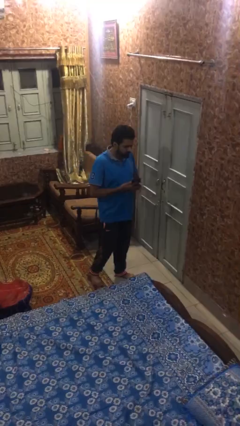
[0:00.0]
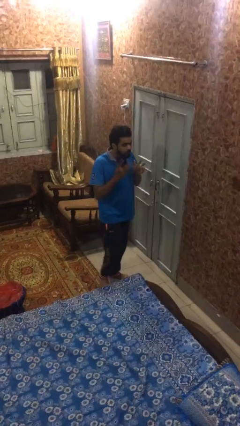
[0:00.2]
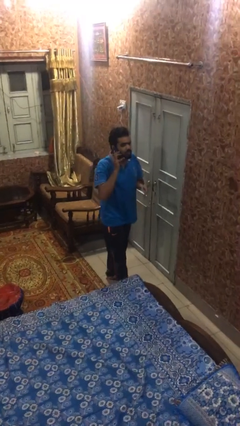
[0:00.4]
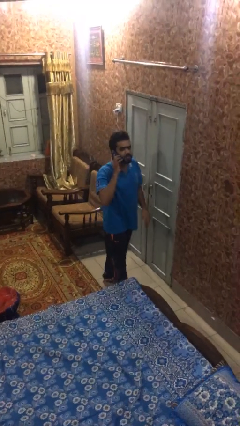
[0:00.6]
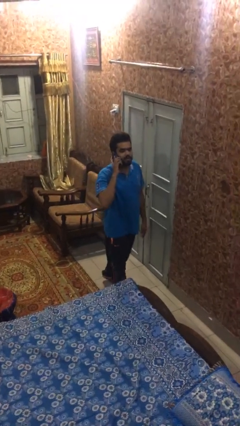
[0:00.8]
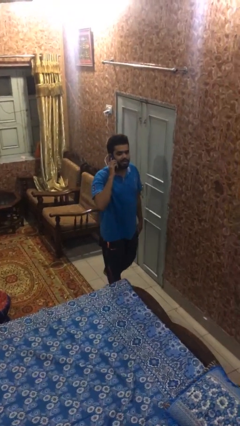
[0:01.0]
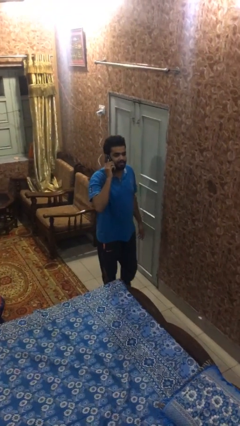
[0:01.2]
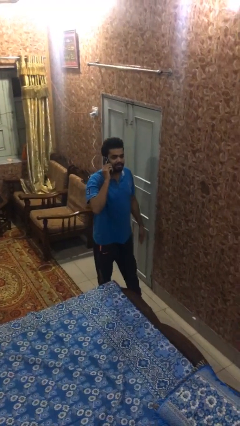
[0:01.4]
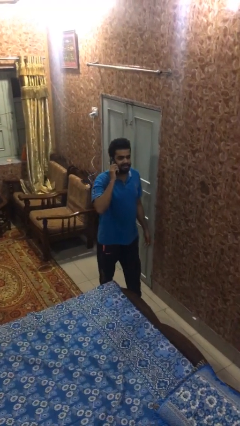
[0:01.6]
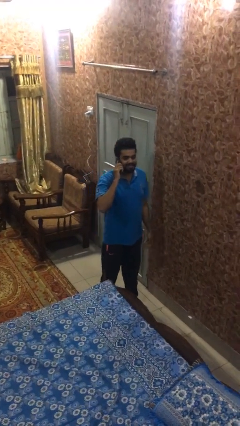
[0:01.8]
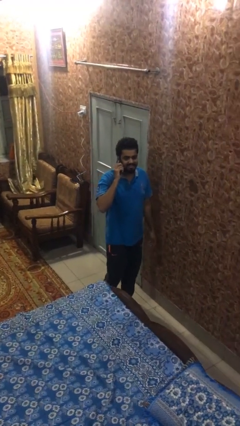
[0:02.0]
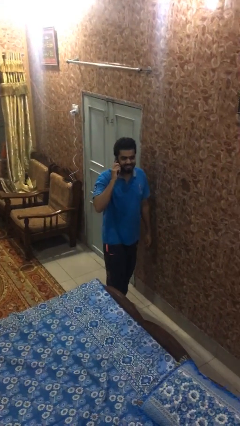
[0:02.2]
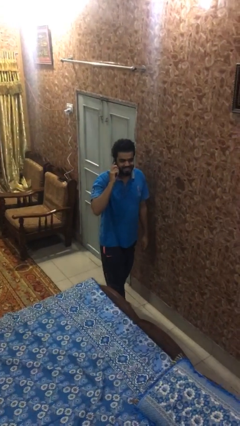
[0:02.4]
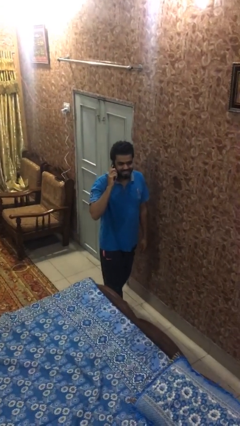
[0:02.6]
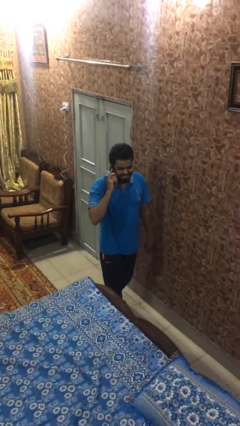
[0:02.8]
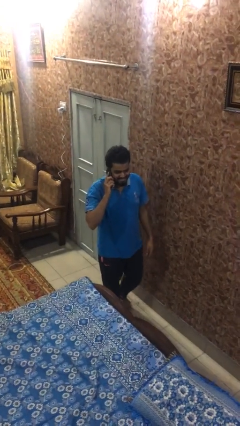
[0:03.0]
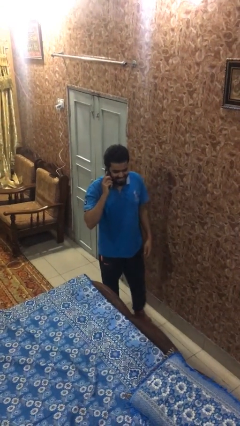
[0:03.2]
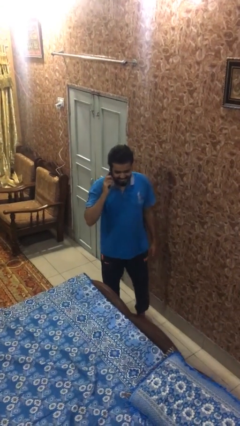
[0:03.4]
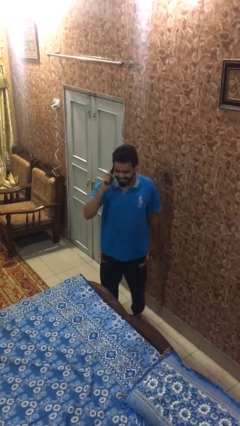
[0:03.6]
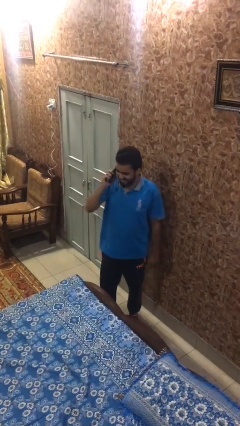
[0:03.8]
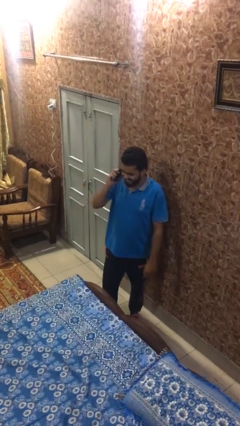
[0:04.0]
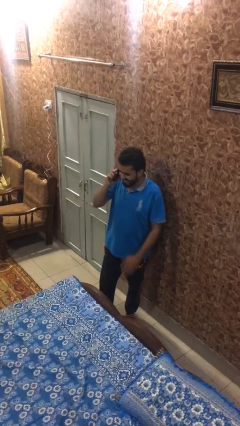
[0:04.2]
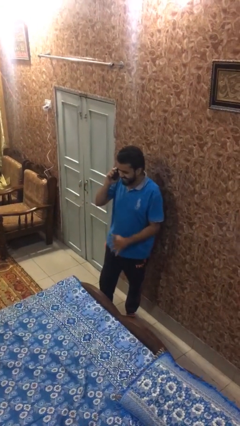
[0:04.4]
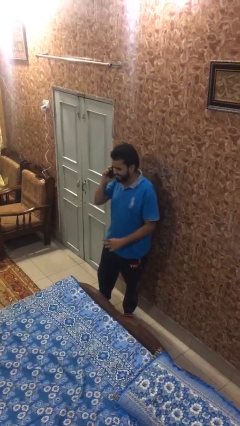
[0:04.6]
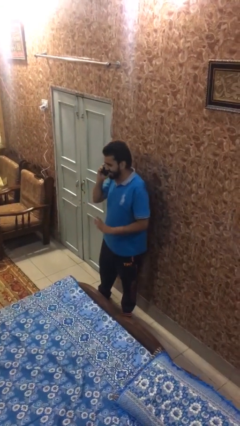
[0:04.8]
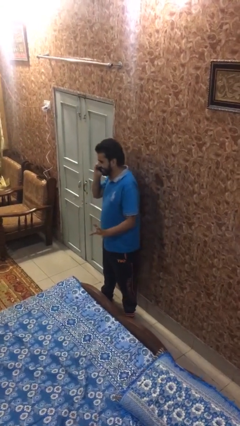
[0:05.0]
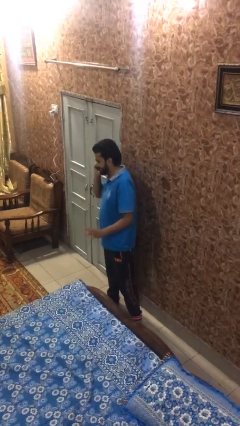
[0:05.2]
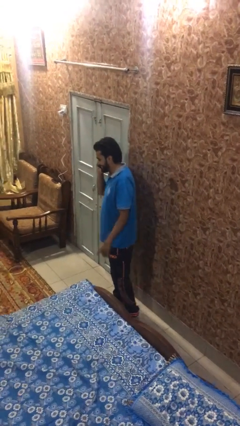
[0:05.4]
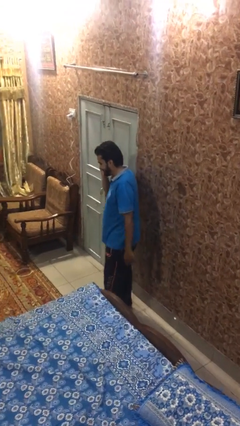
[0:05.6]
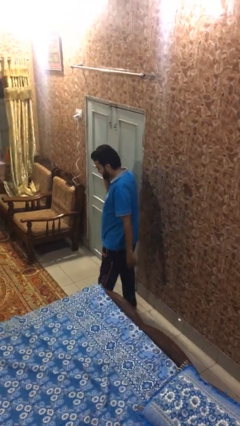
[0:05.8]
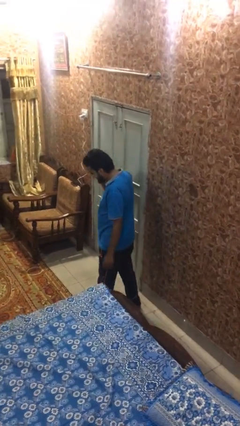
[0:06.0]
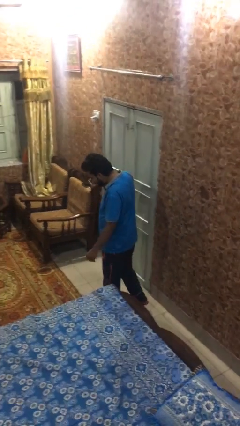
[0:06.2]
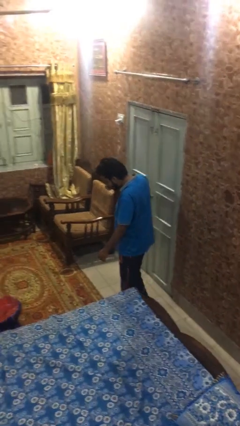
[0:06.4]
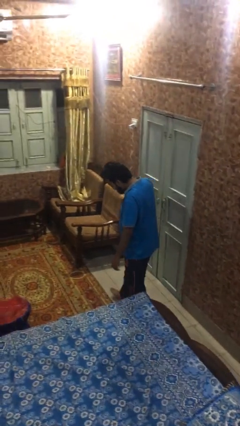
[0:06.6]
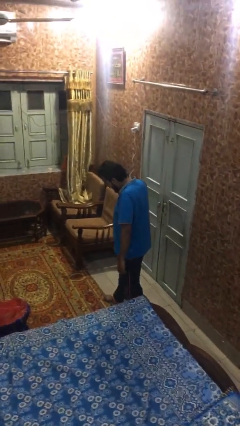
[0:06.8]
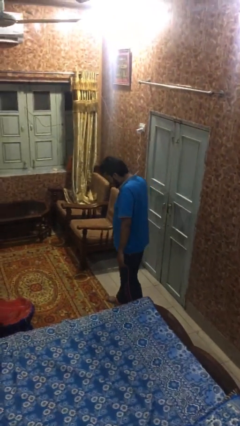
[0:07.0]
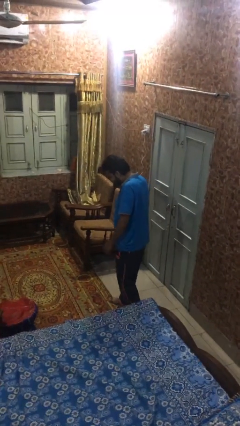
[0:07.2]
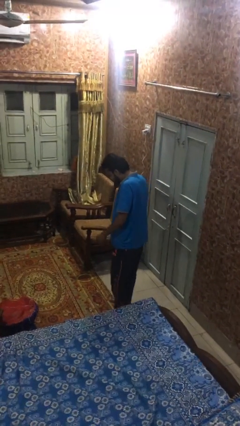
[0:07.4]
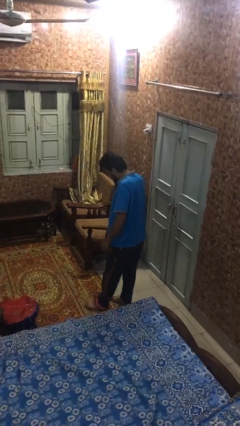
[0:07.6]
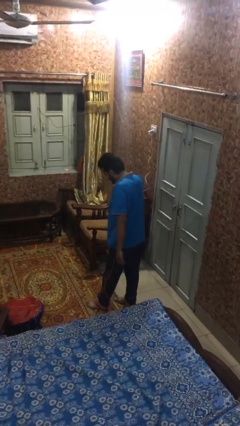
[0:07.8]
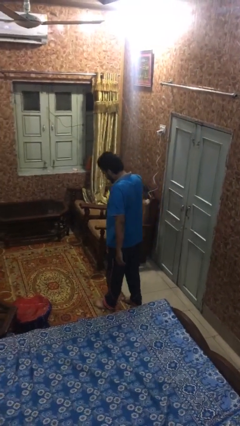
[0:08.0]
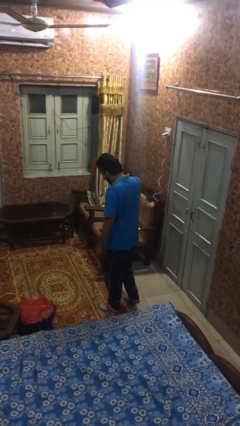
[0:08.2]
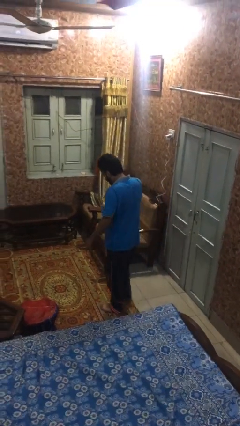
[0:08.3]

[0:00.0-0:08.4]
person talks on phone

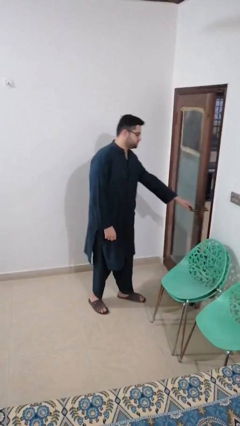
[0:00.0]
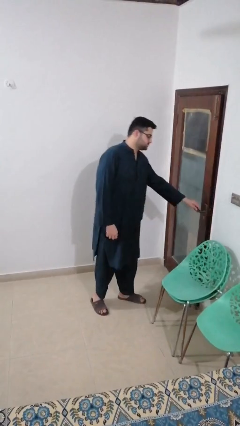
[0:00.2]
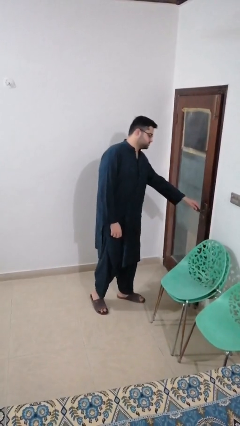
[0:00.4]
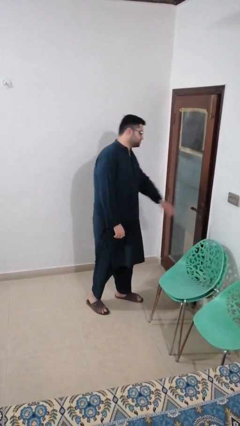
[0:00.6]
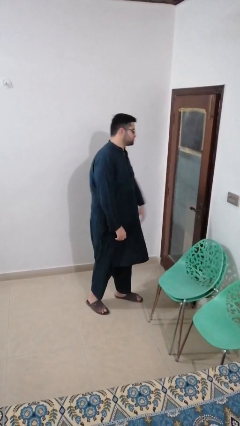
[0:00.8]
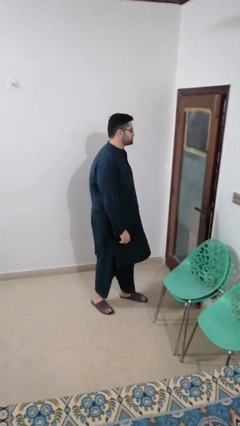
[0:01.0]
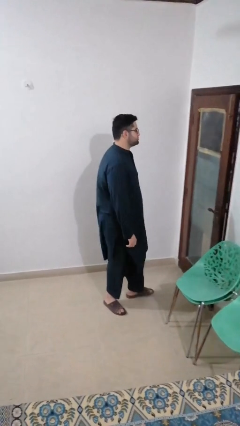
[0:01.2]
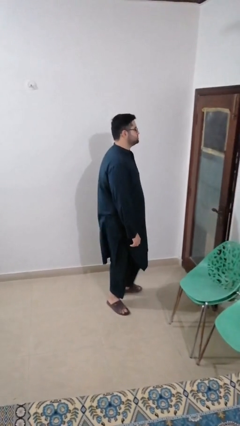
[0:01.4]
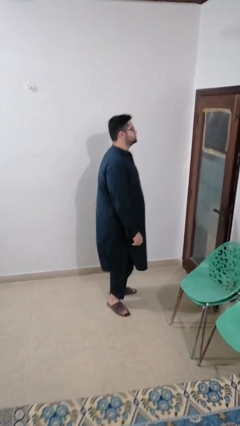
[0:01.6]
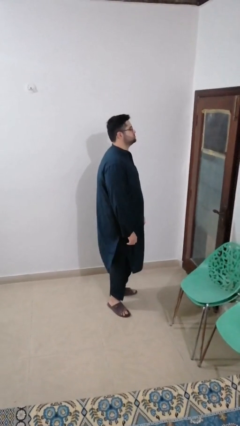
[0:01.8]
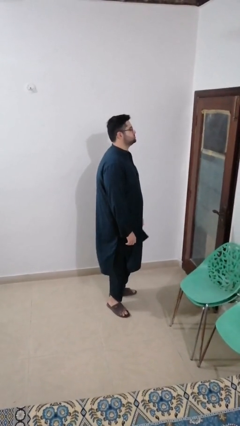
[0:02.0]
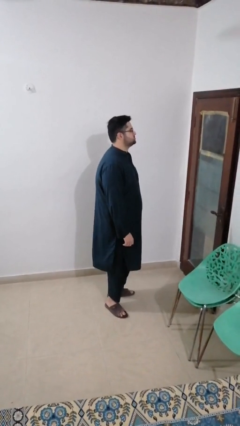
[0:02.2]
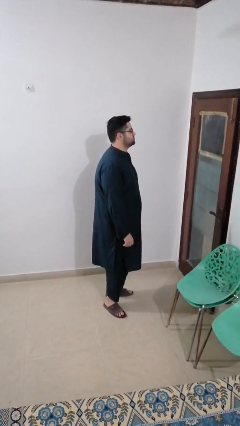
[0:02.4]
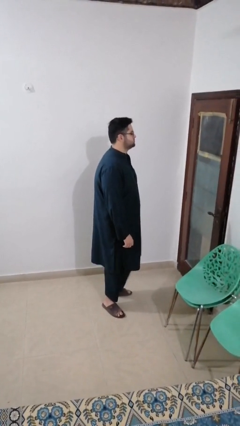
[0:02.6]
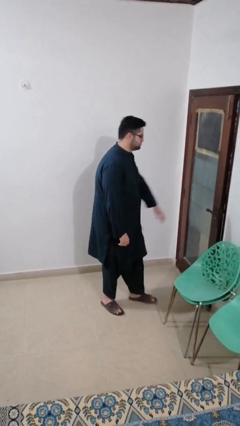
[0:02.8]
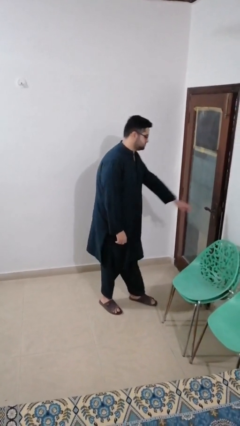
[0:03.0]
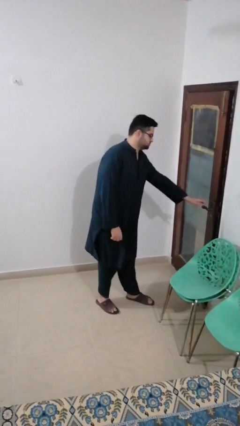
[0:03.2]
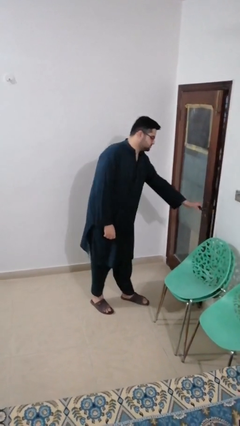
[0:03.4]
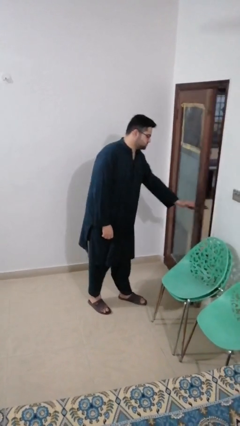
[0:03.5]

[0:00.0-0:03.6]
person closes facility door

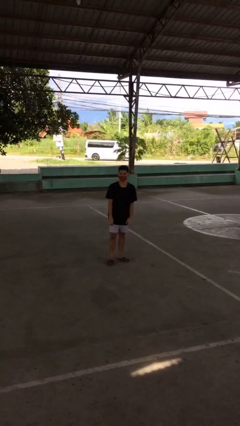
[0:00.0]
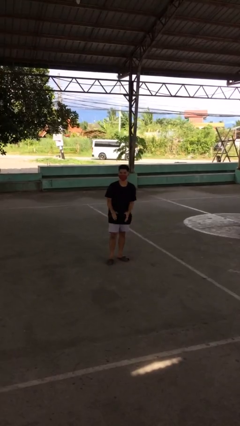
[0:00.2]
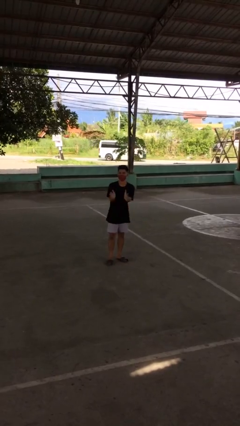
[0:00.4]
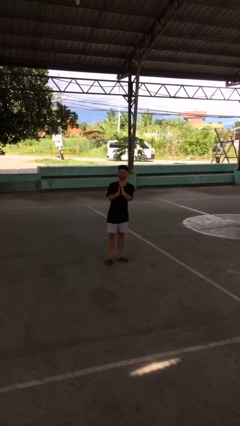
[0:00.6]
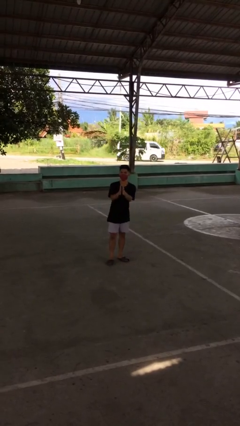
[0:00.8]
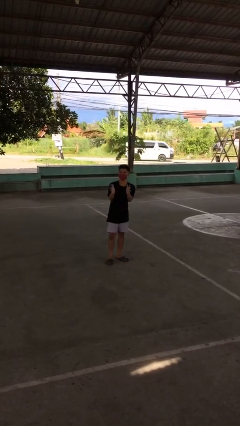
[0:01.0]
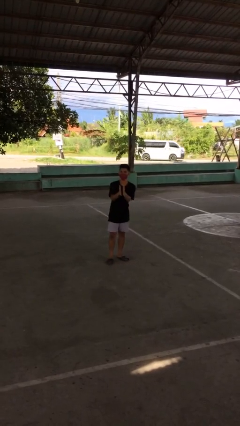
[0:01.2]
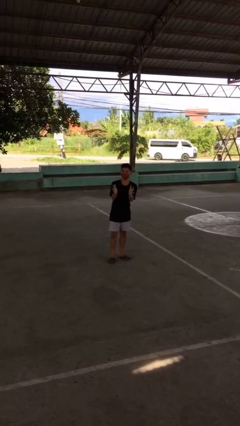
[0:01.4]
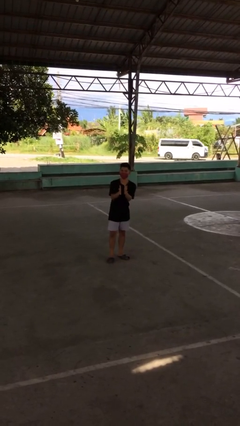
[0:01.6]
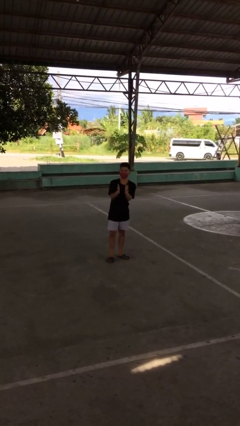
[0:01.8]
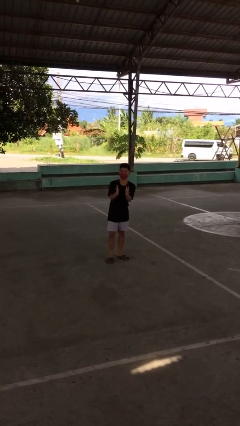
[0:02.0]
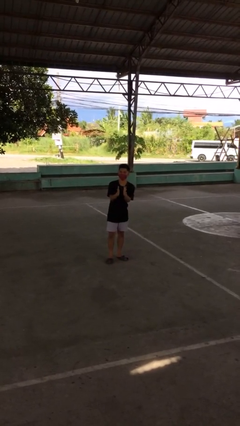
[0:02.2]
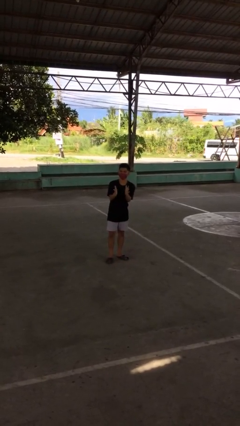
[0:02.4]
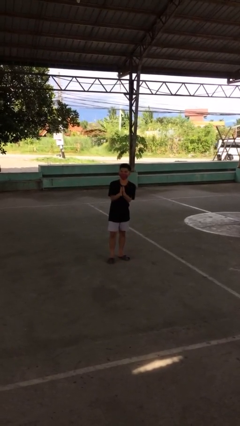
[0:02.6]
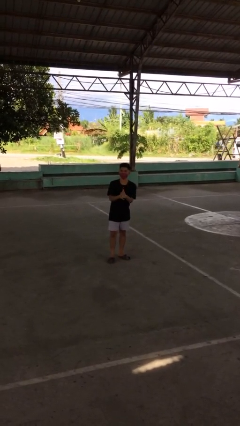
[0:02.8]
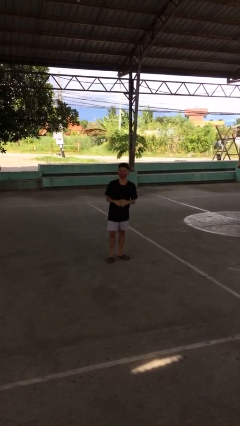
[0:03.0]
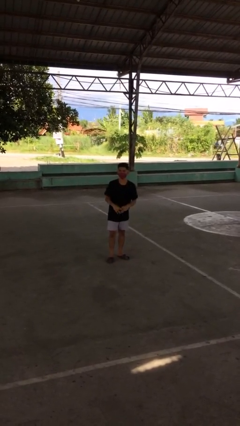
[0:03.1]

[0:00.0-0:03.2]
person claps hands

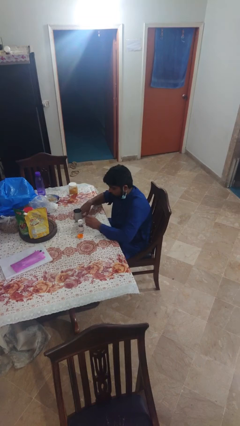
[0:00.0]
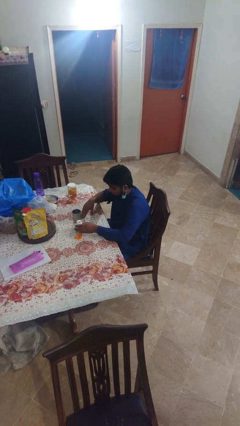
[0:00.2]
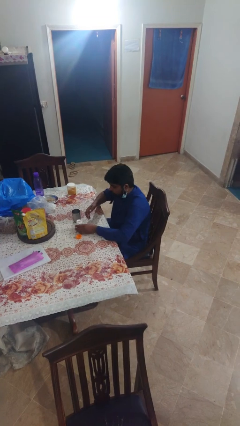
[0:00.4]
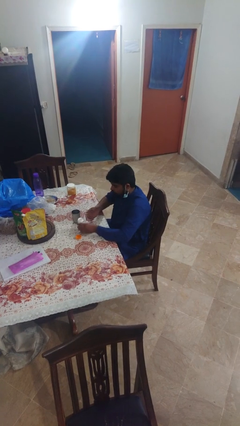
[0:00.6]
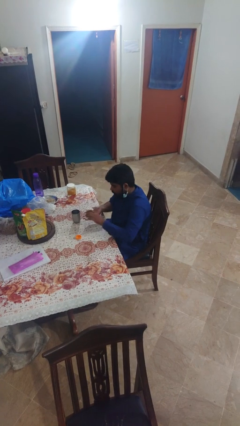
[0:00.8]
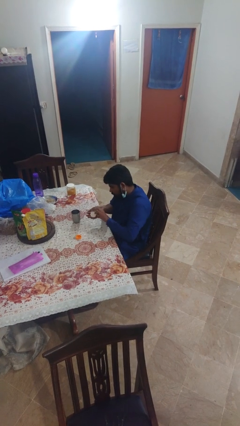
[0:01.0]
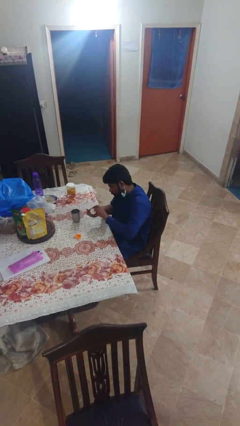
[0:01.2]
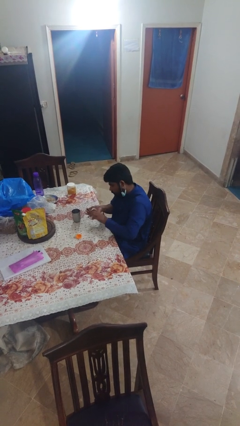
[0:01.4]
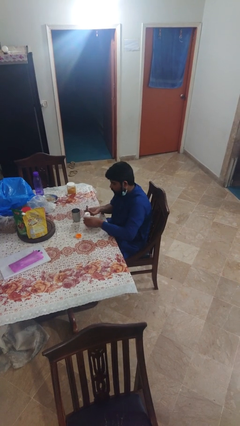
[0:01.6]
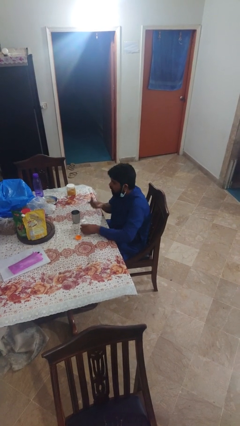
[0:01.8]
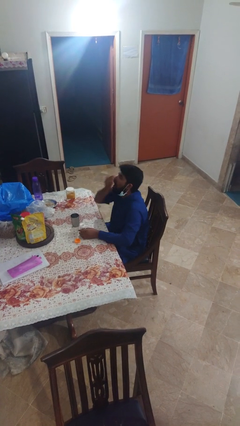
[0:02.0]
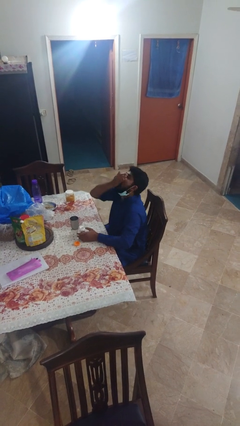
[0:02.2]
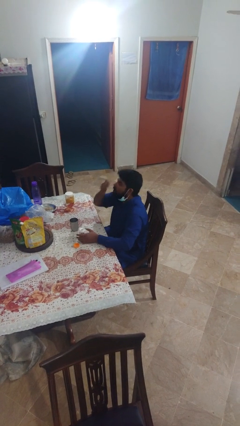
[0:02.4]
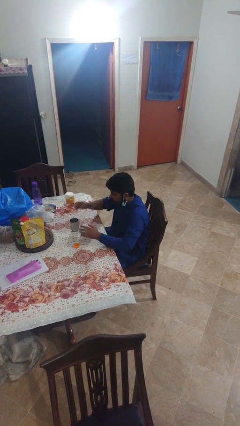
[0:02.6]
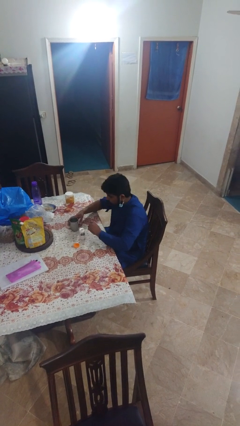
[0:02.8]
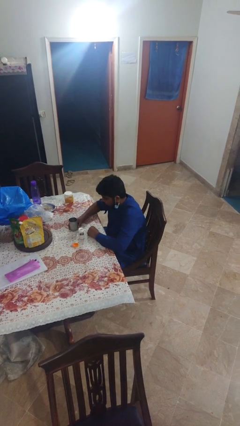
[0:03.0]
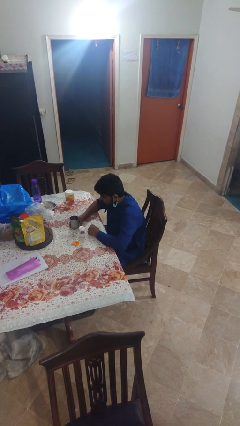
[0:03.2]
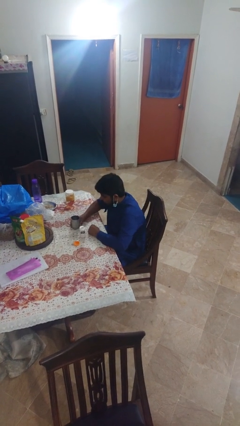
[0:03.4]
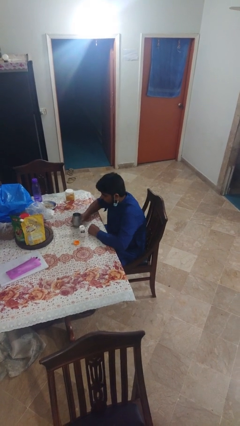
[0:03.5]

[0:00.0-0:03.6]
person takes medicine pills
